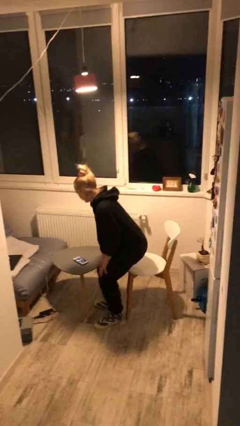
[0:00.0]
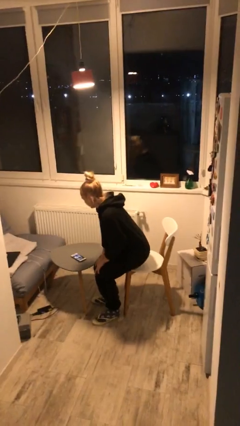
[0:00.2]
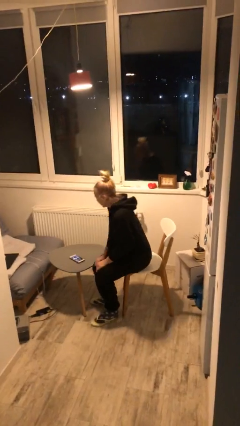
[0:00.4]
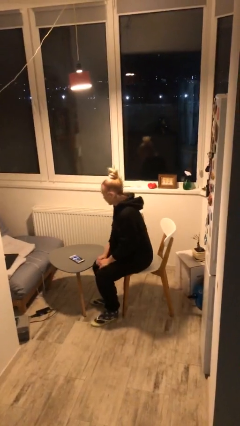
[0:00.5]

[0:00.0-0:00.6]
person sits down

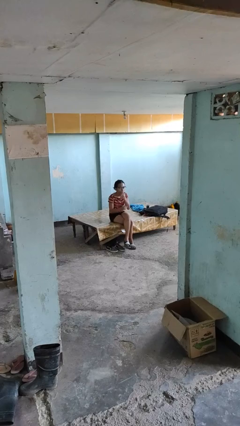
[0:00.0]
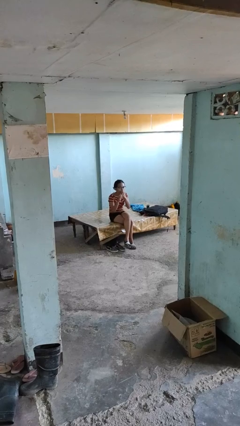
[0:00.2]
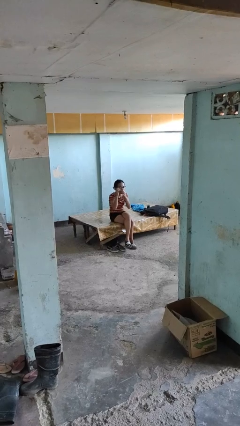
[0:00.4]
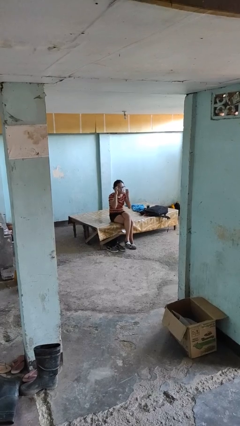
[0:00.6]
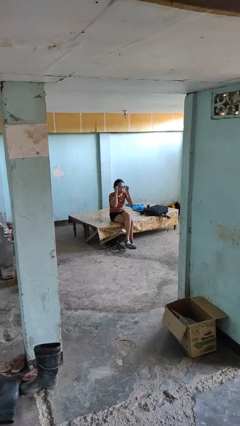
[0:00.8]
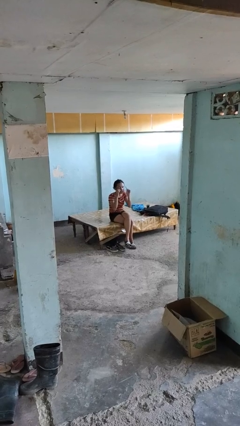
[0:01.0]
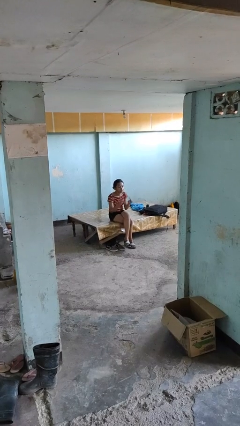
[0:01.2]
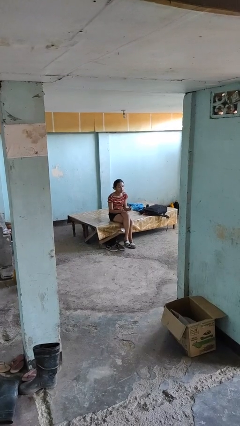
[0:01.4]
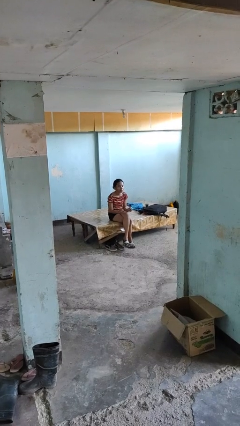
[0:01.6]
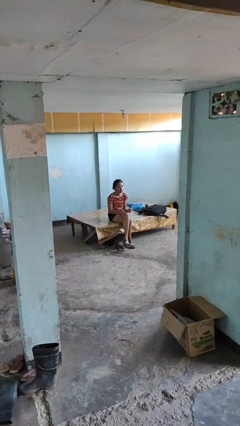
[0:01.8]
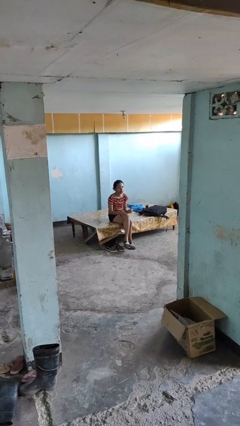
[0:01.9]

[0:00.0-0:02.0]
person takes off glasses

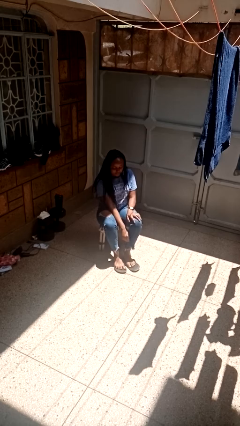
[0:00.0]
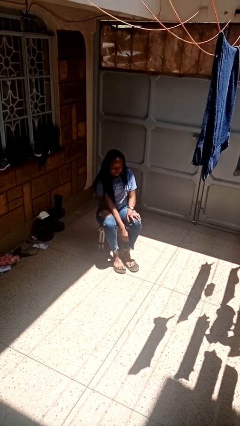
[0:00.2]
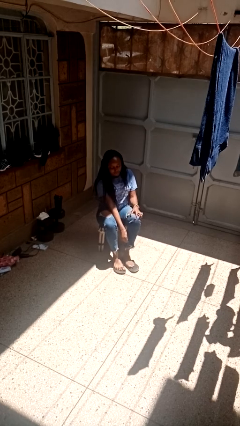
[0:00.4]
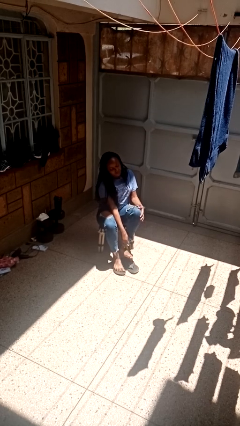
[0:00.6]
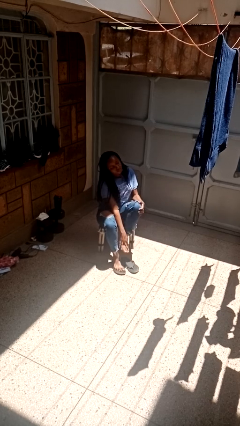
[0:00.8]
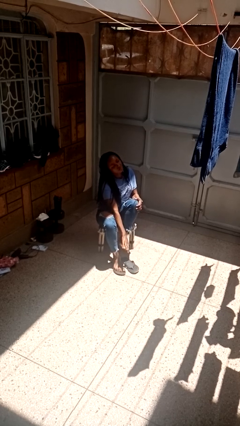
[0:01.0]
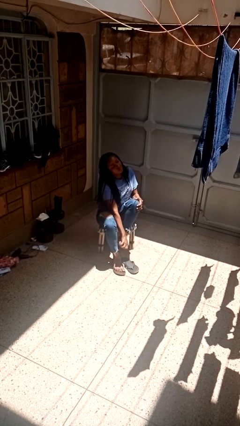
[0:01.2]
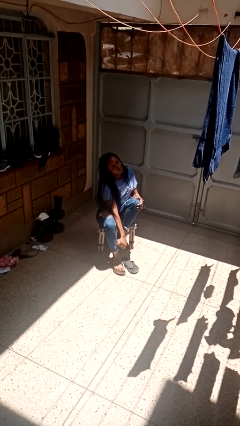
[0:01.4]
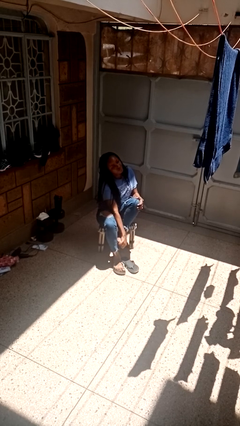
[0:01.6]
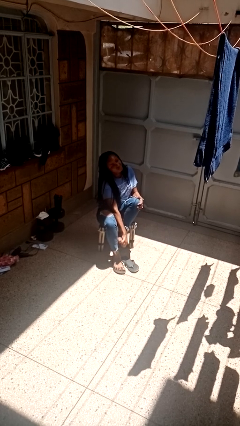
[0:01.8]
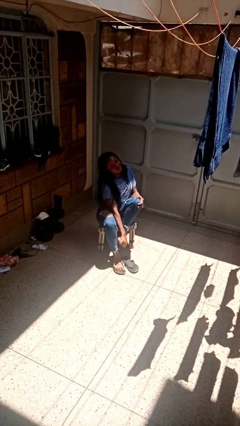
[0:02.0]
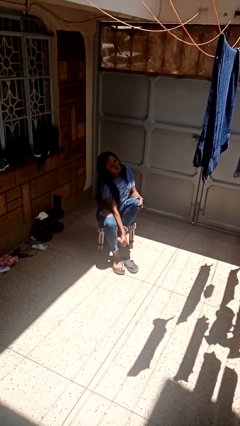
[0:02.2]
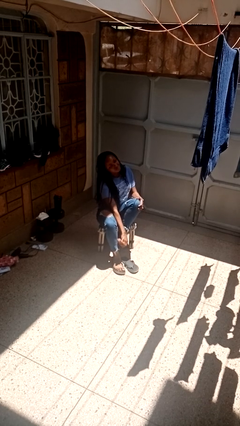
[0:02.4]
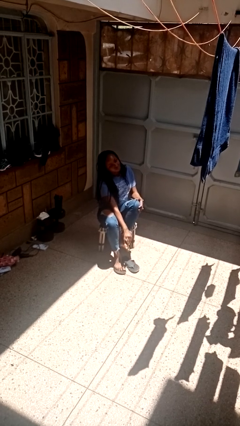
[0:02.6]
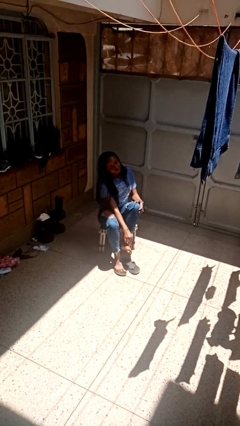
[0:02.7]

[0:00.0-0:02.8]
person rubs foot

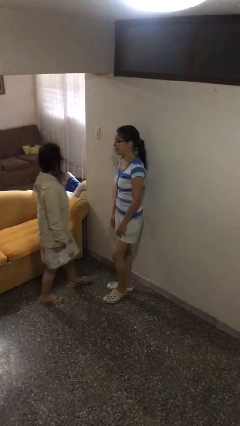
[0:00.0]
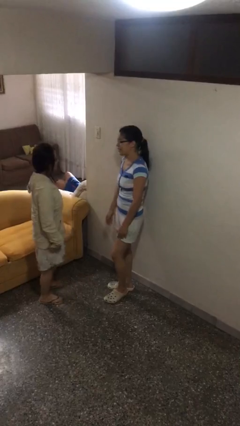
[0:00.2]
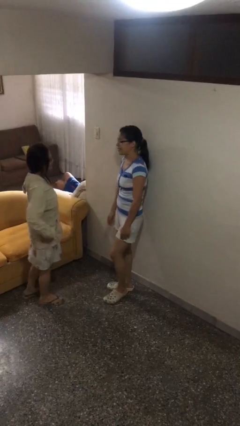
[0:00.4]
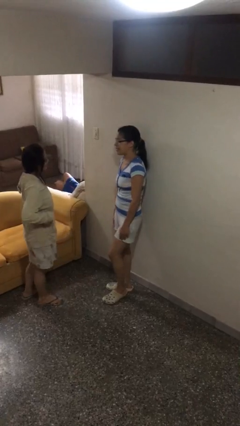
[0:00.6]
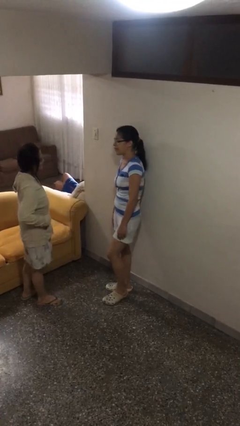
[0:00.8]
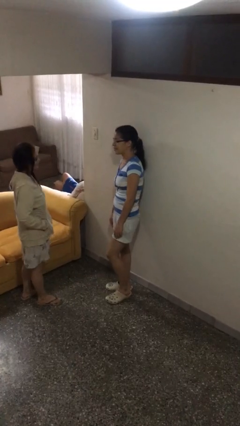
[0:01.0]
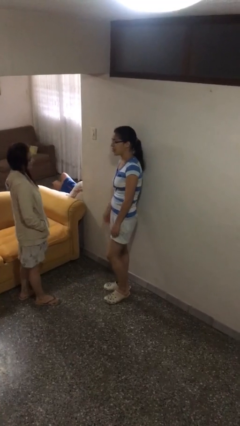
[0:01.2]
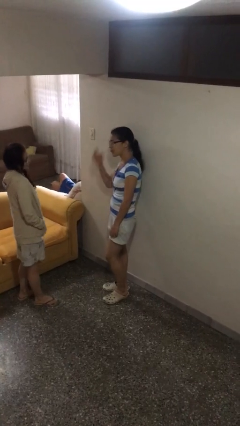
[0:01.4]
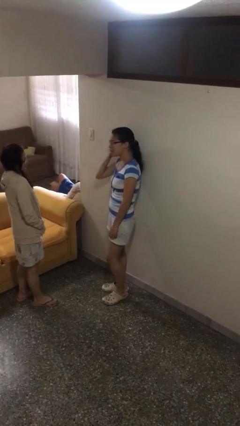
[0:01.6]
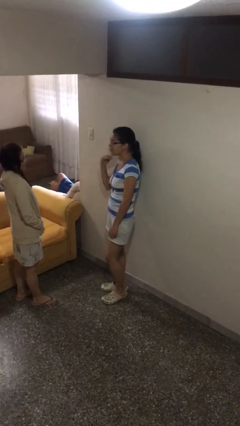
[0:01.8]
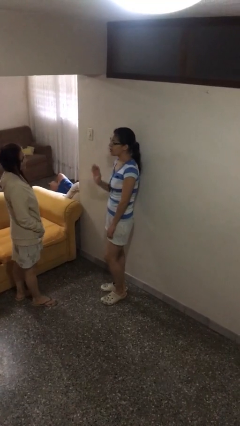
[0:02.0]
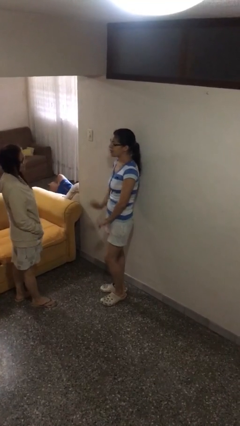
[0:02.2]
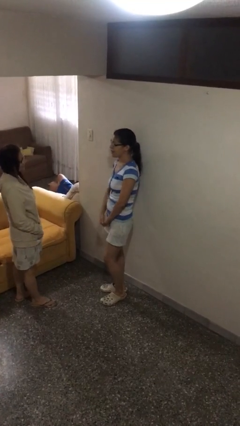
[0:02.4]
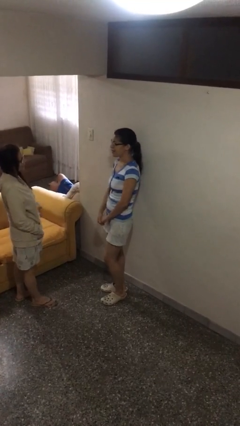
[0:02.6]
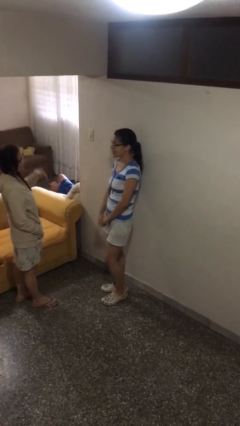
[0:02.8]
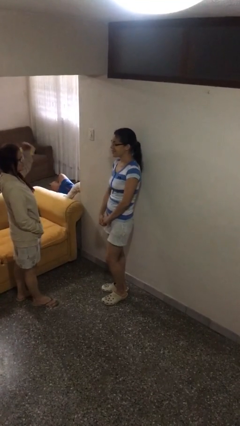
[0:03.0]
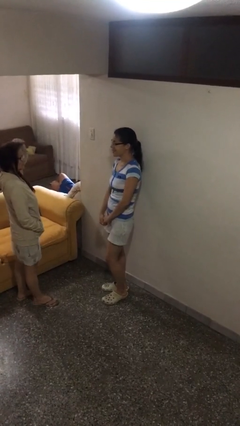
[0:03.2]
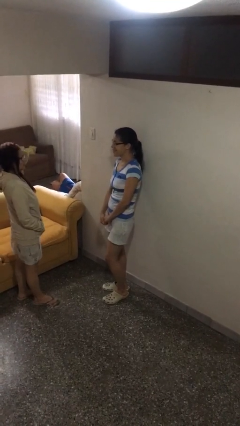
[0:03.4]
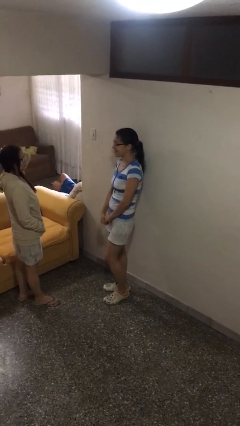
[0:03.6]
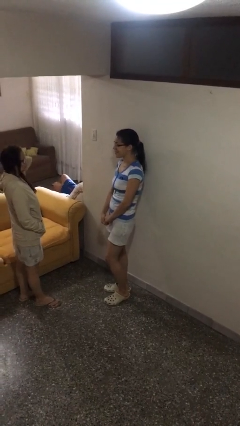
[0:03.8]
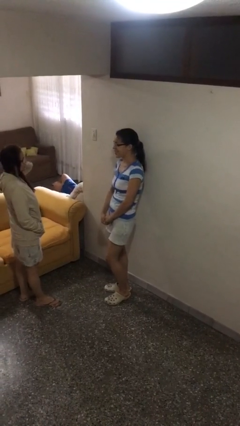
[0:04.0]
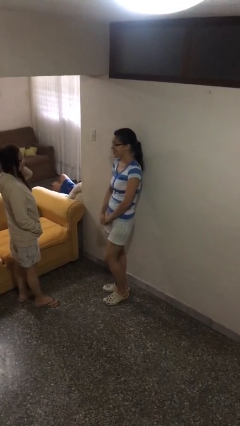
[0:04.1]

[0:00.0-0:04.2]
person talks to person

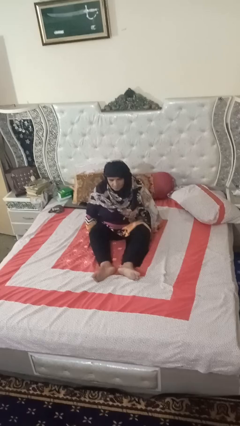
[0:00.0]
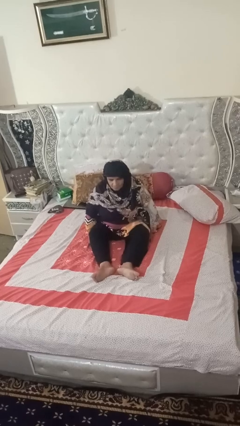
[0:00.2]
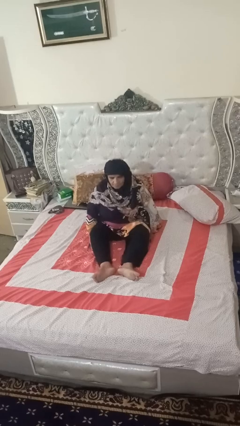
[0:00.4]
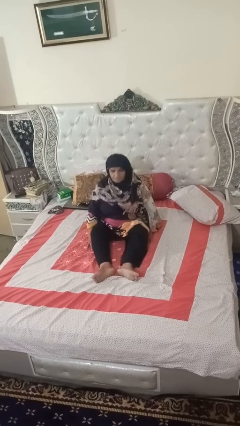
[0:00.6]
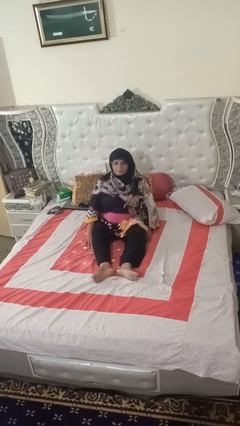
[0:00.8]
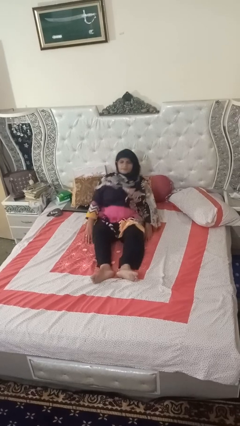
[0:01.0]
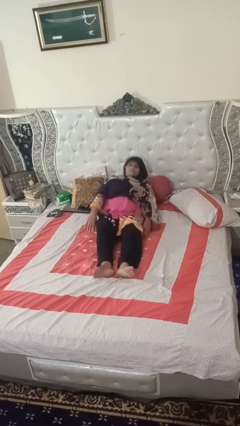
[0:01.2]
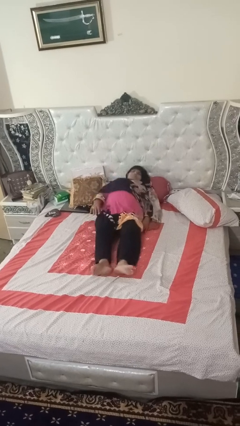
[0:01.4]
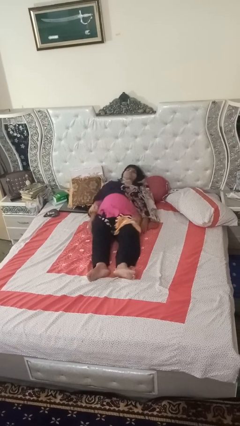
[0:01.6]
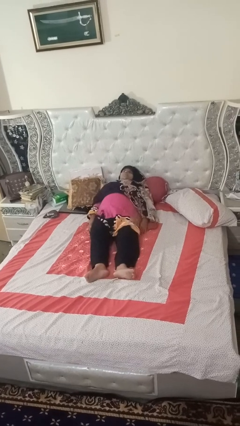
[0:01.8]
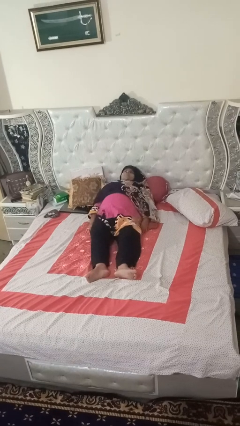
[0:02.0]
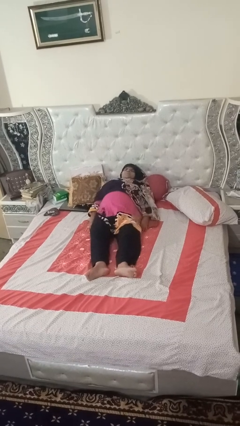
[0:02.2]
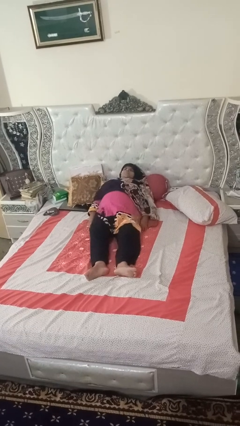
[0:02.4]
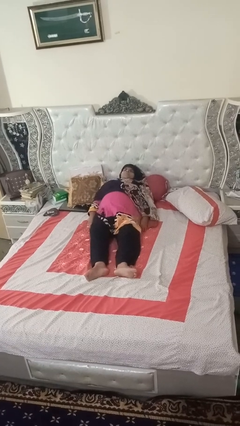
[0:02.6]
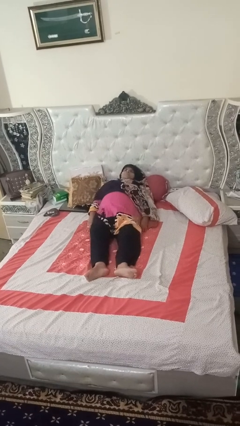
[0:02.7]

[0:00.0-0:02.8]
person lies down on bed

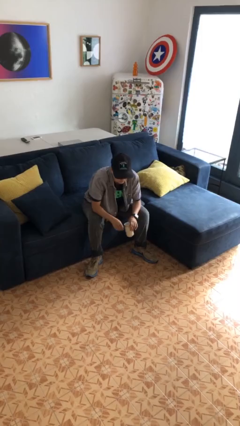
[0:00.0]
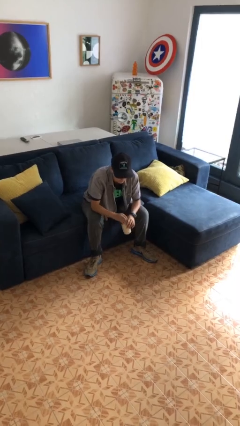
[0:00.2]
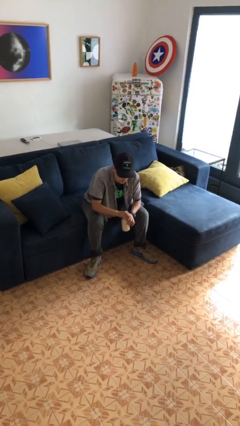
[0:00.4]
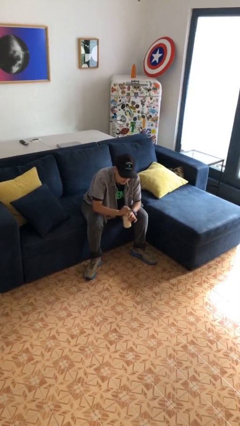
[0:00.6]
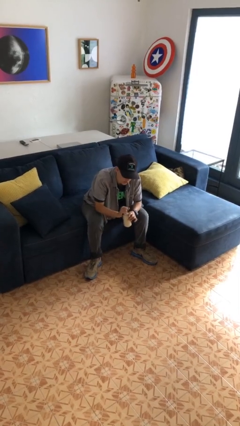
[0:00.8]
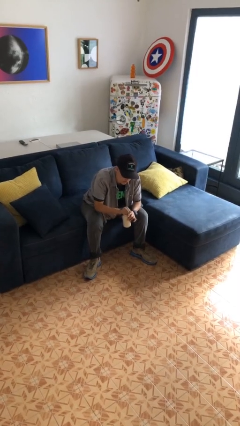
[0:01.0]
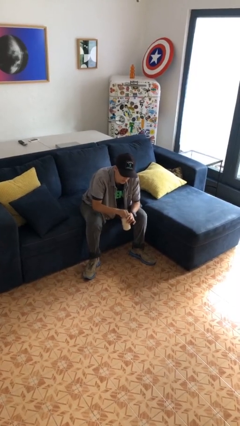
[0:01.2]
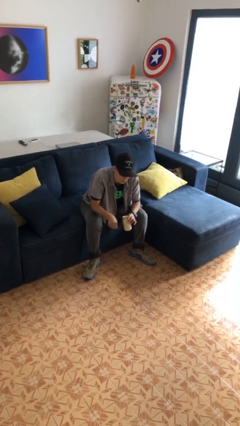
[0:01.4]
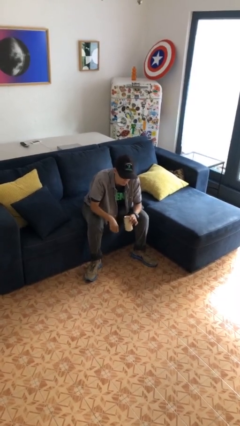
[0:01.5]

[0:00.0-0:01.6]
person opens beverage can

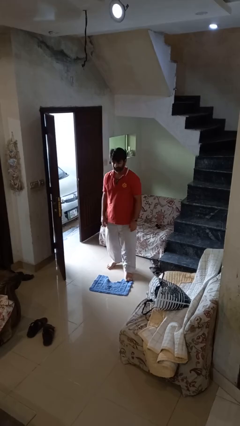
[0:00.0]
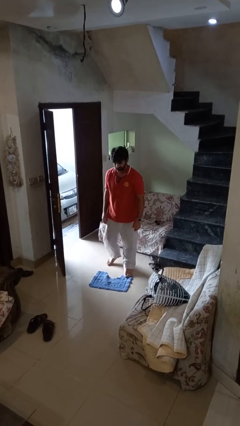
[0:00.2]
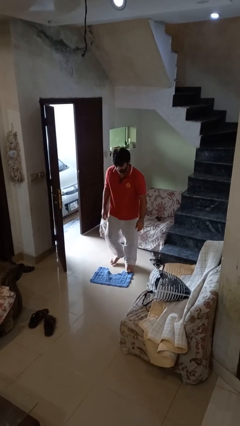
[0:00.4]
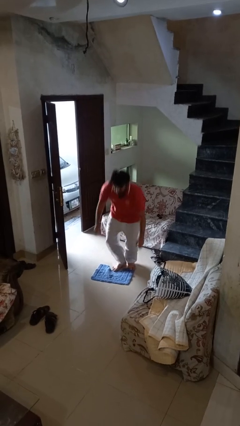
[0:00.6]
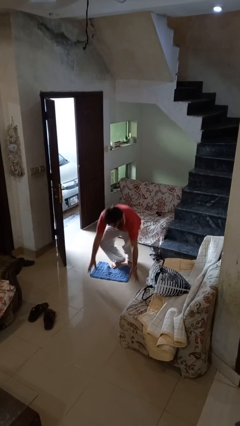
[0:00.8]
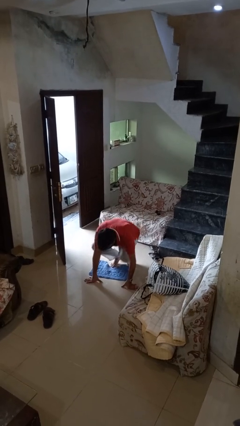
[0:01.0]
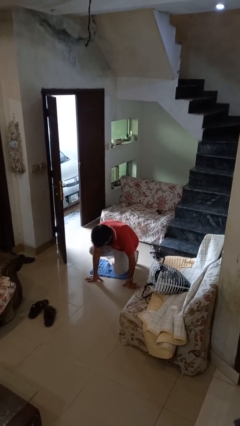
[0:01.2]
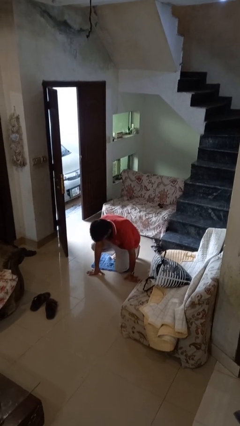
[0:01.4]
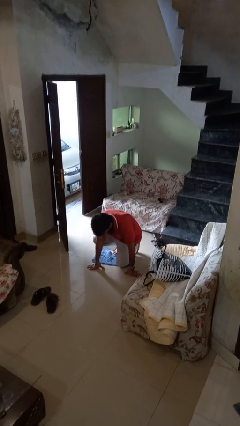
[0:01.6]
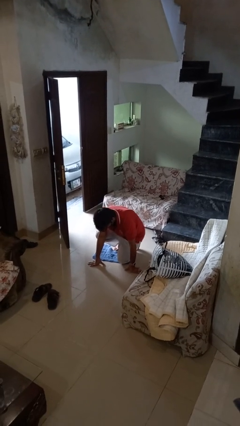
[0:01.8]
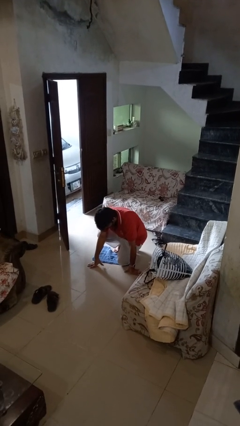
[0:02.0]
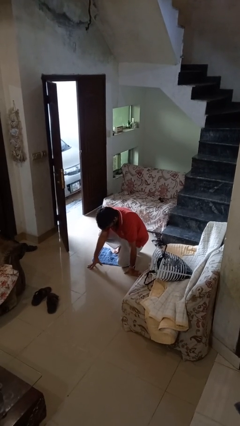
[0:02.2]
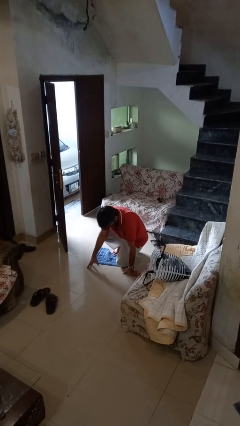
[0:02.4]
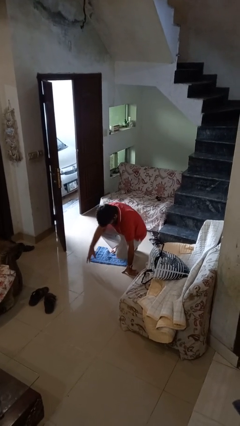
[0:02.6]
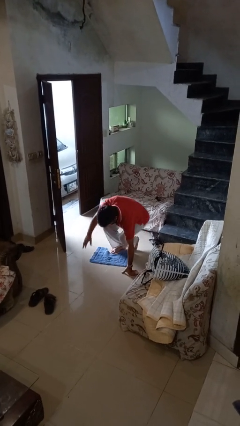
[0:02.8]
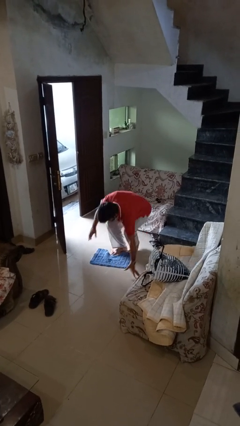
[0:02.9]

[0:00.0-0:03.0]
person trips on object on floor

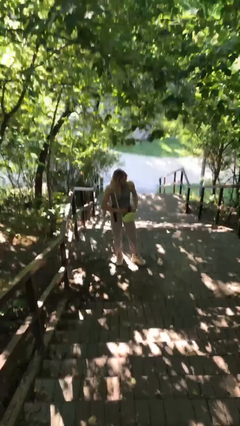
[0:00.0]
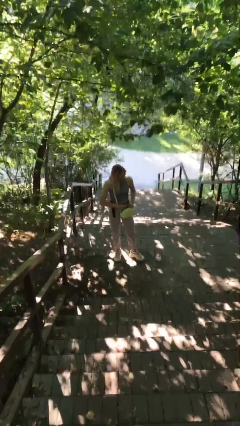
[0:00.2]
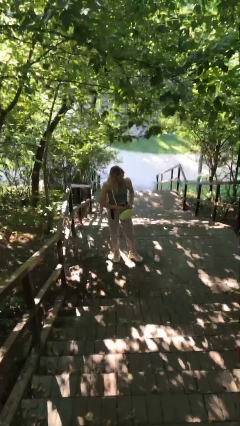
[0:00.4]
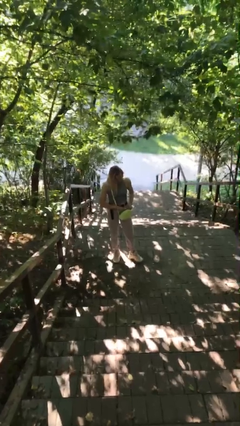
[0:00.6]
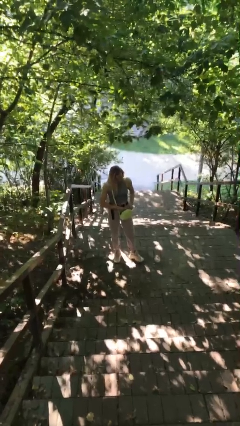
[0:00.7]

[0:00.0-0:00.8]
person puts object into purse
